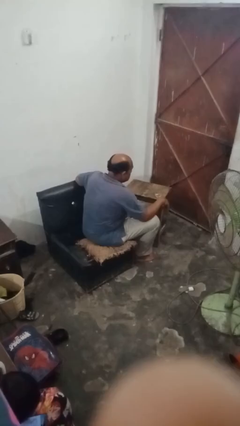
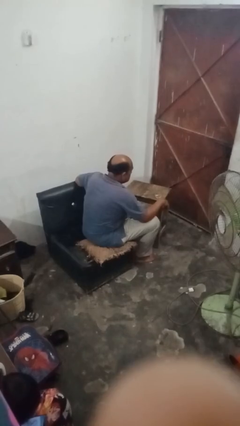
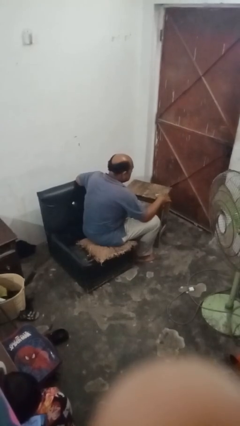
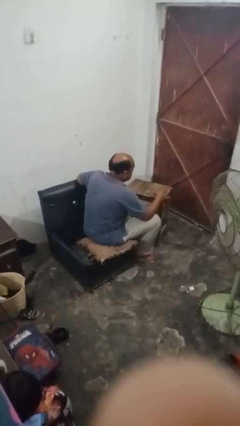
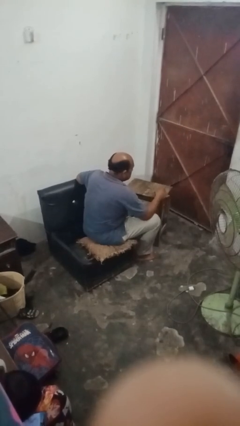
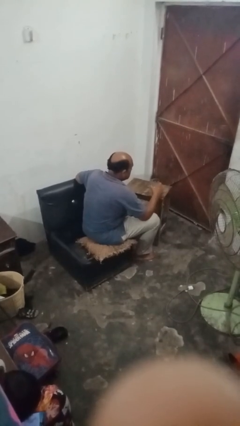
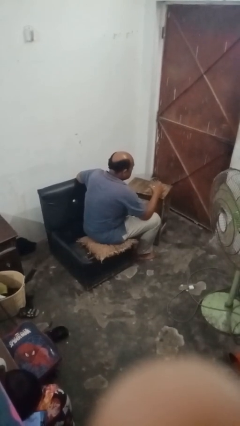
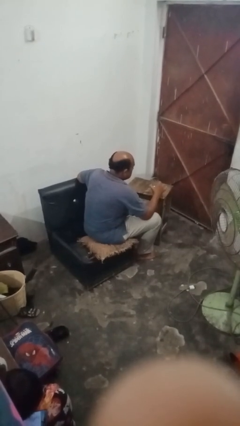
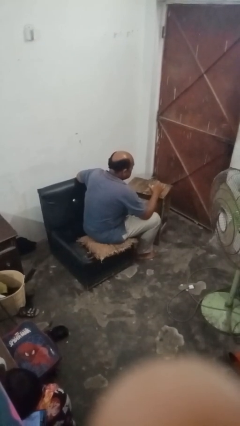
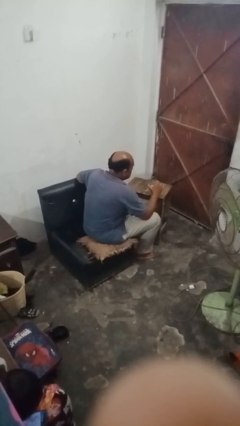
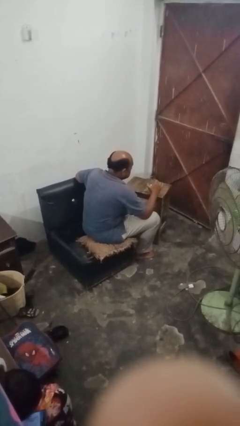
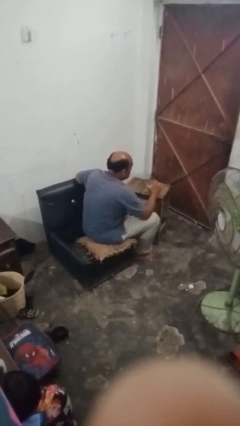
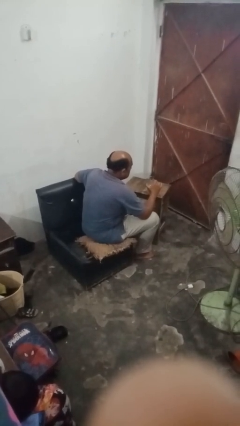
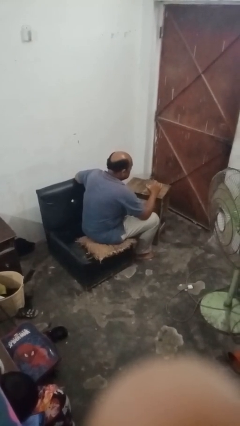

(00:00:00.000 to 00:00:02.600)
person picks up object from table

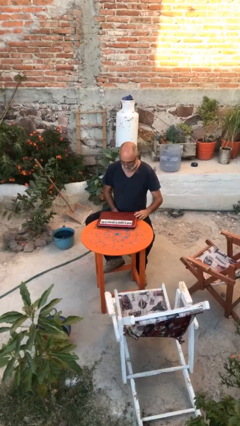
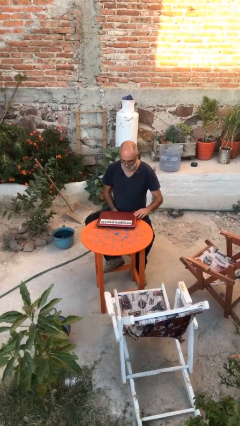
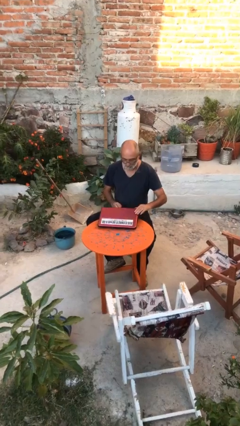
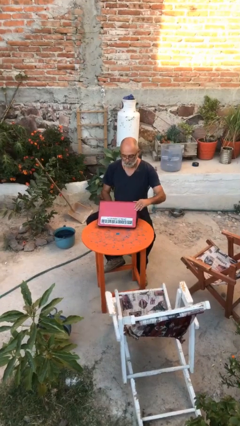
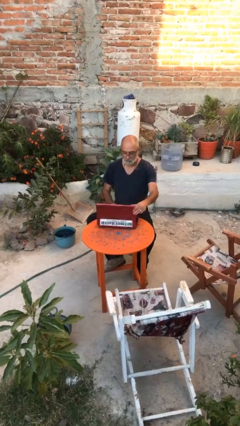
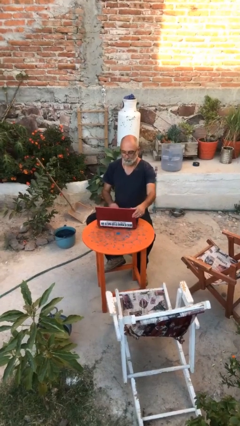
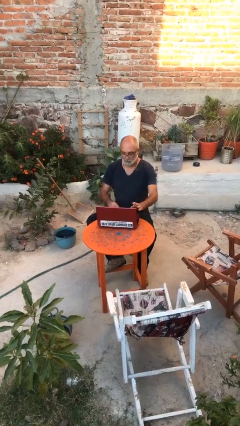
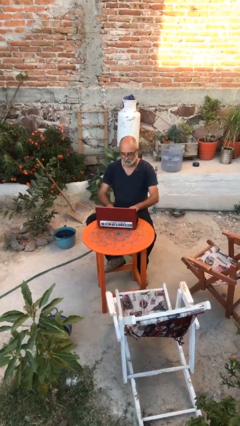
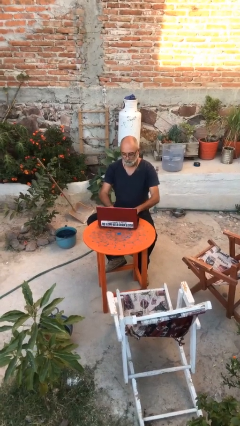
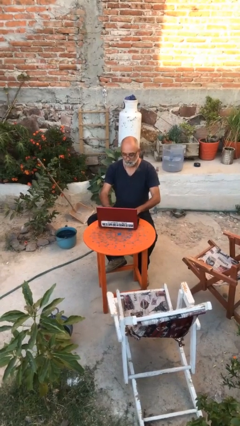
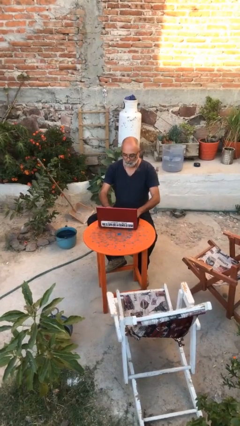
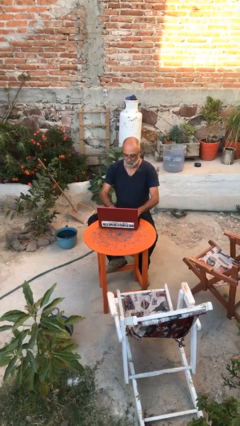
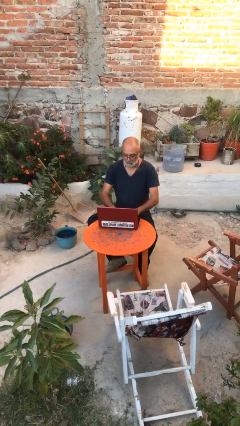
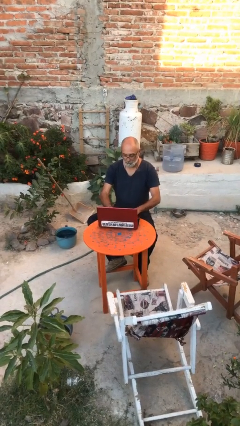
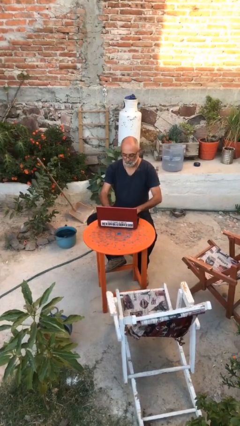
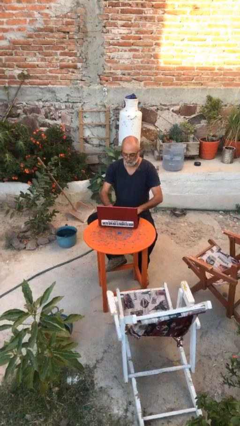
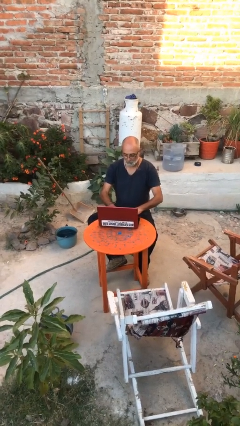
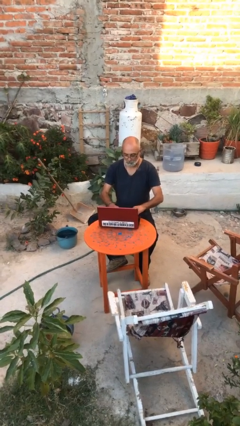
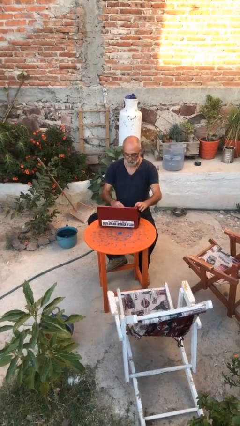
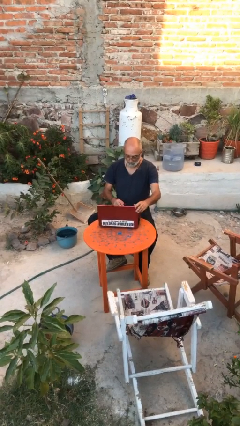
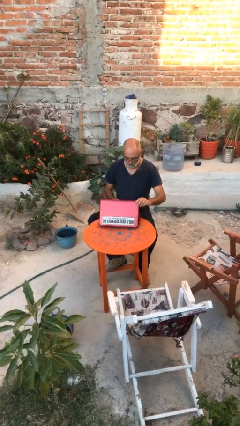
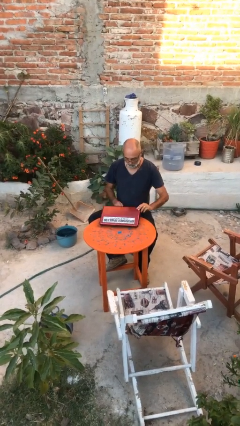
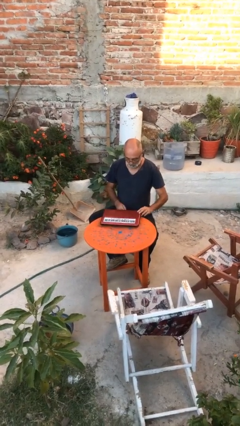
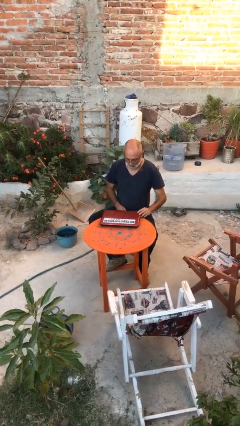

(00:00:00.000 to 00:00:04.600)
person interacts with laptop

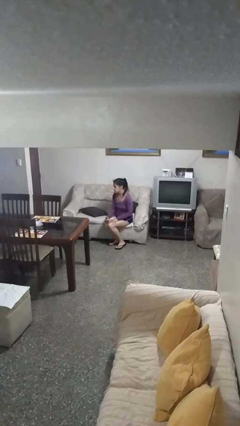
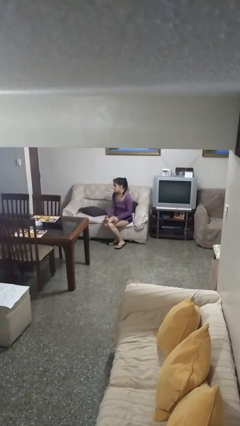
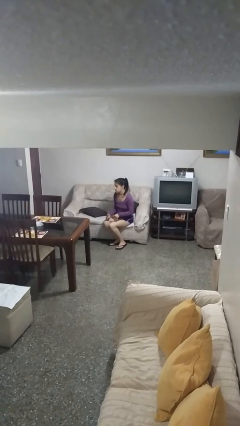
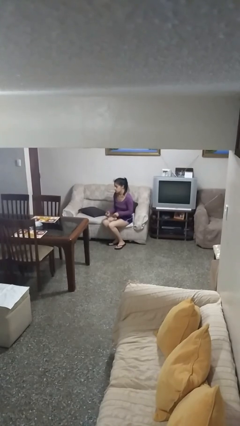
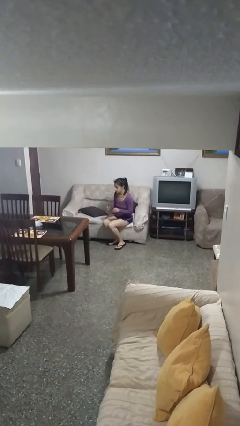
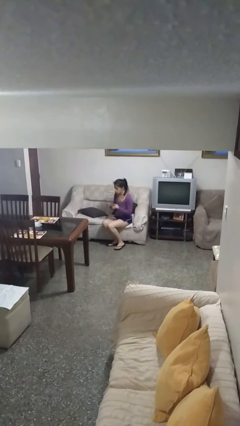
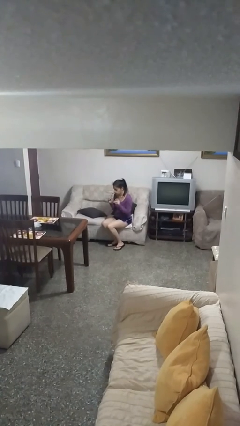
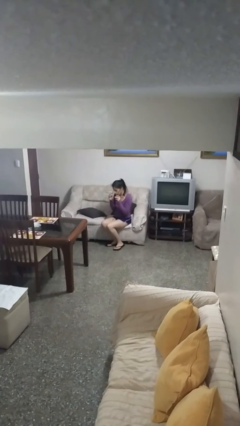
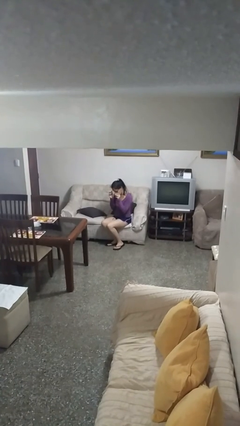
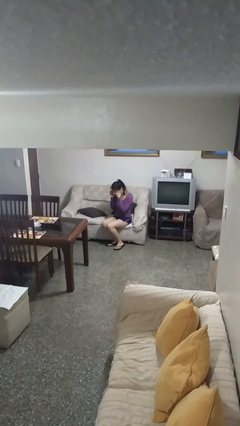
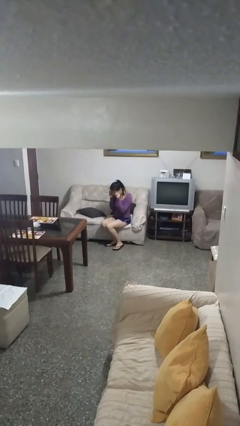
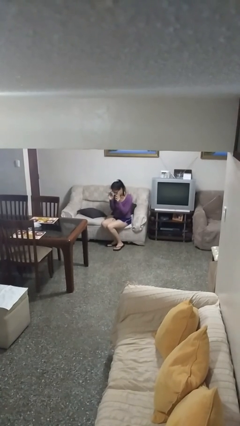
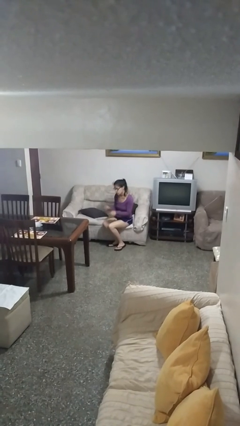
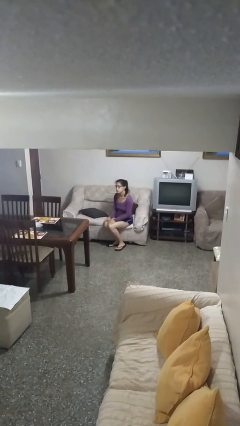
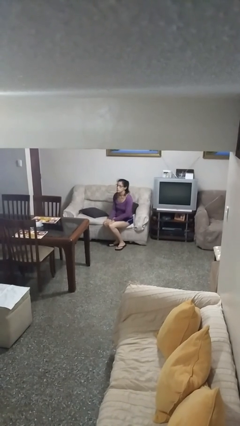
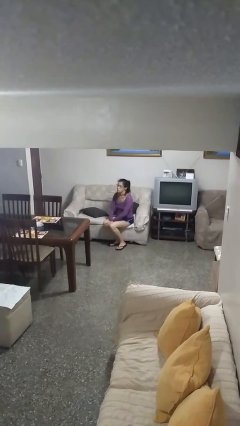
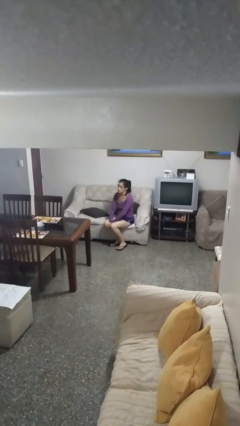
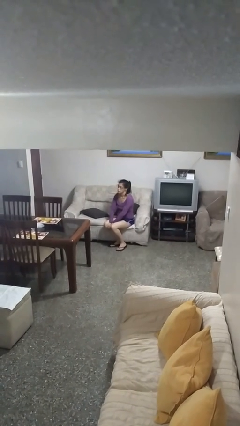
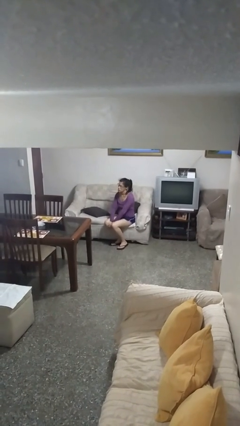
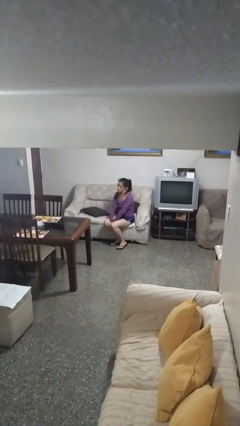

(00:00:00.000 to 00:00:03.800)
person puts on glasses

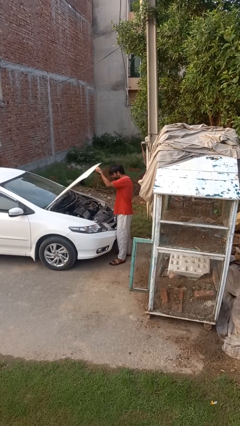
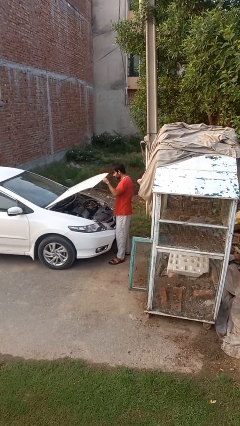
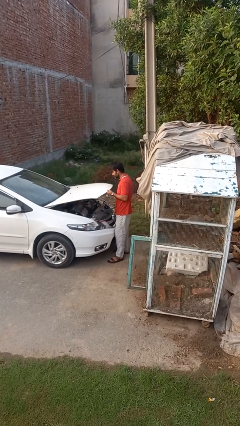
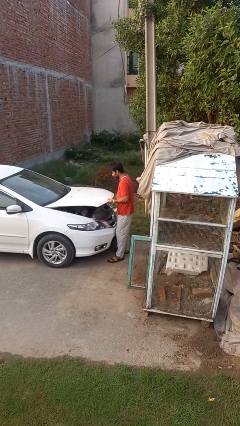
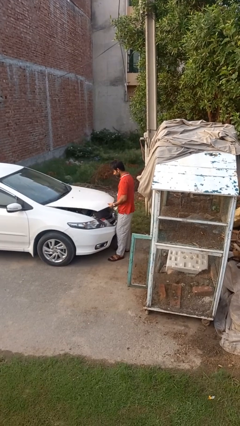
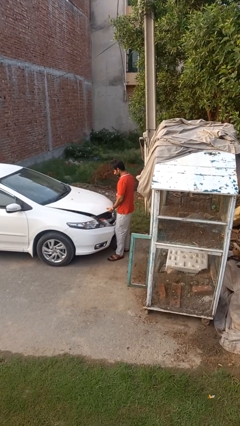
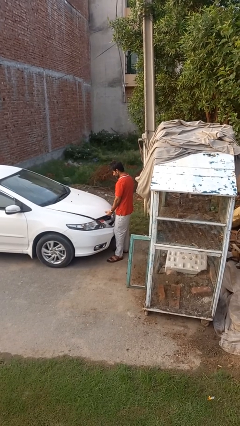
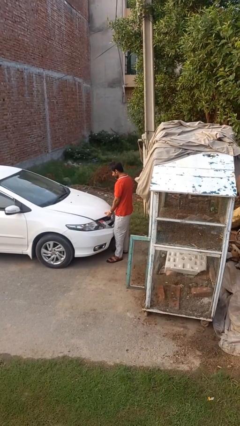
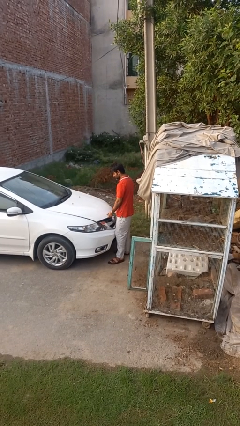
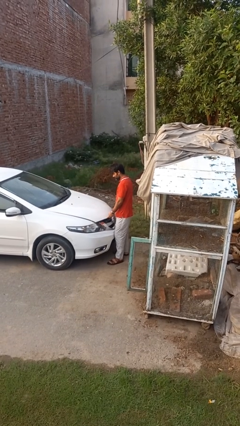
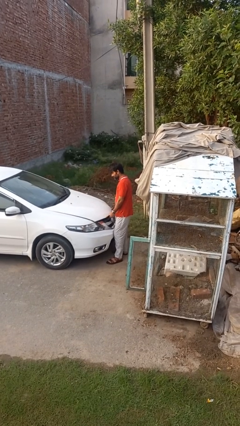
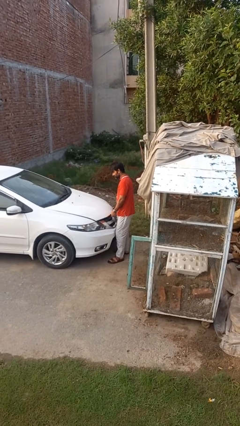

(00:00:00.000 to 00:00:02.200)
person closes car hood

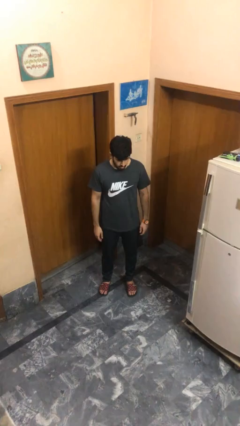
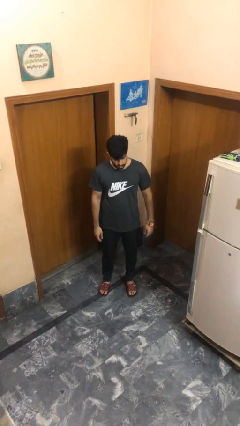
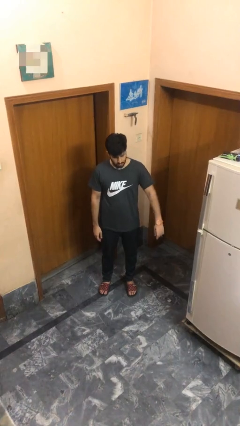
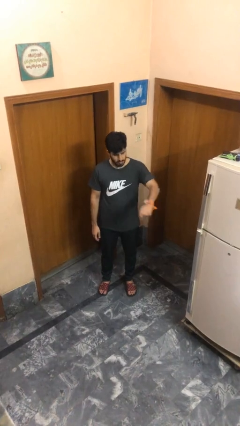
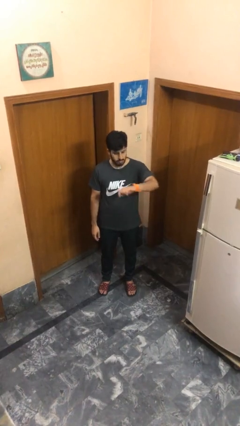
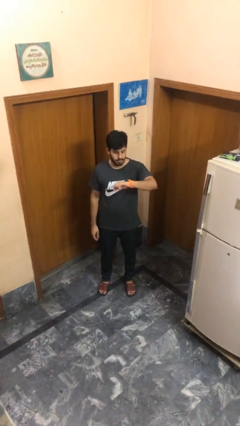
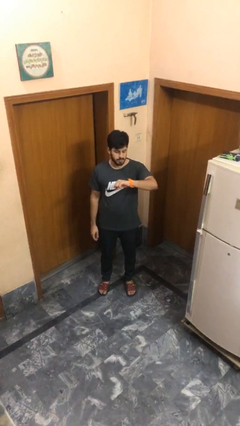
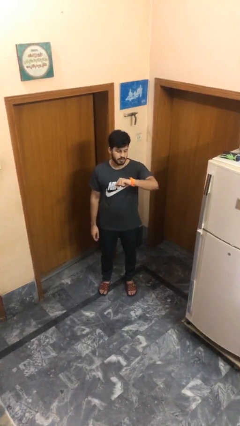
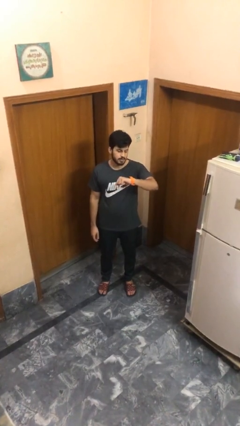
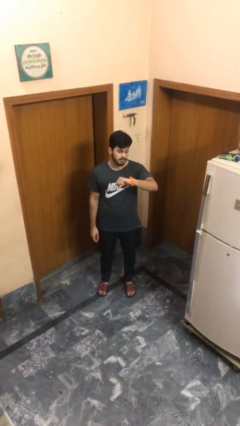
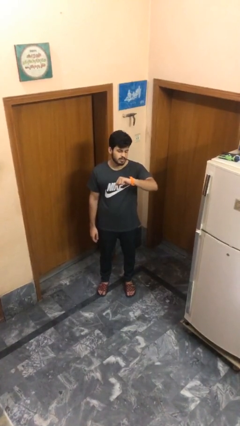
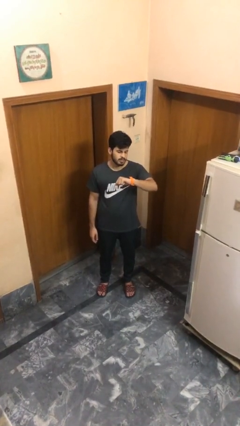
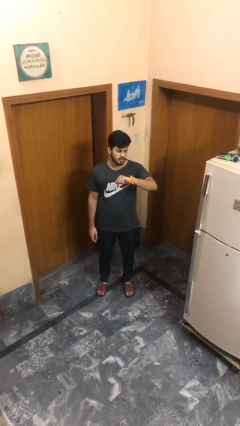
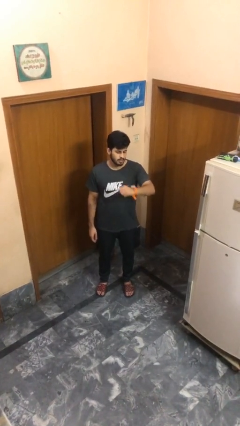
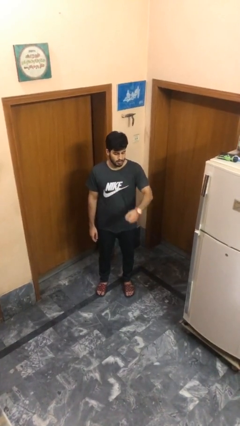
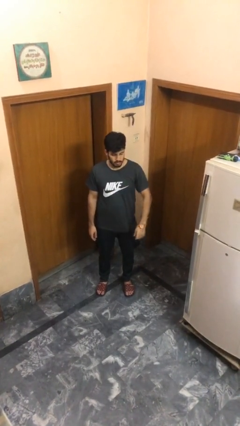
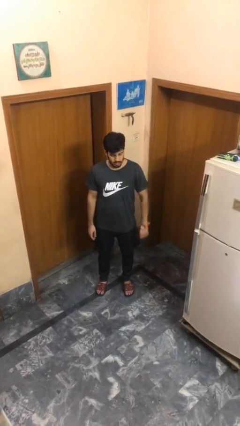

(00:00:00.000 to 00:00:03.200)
person looks at wristwatch

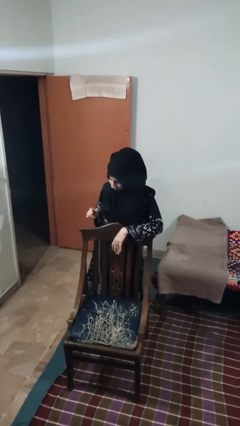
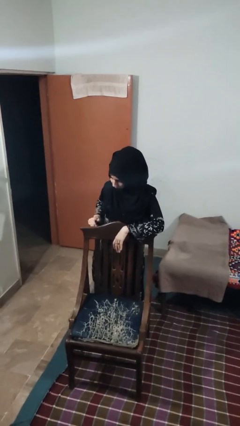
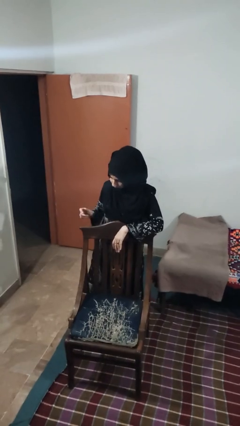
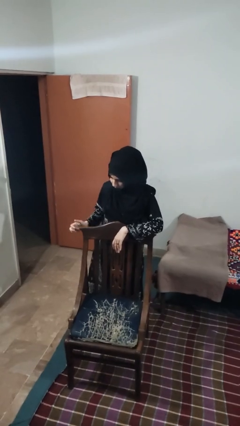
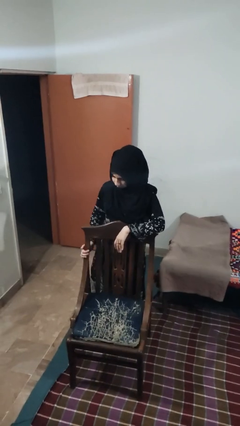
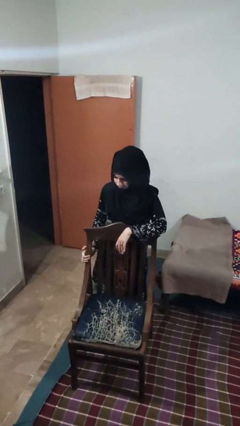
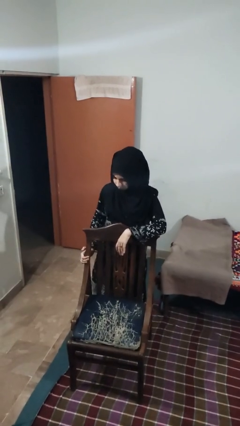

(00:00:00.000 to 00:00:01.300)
person taps object with finger
